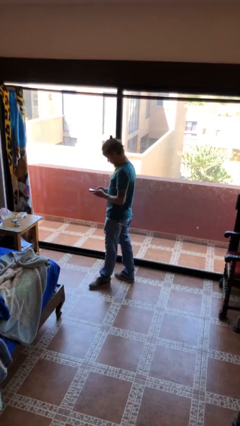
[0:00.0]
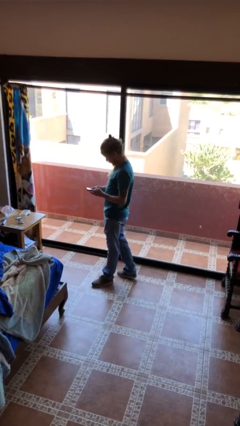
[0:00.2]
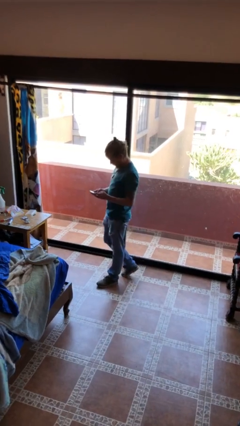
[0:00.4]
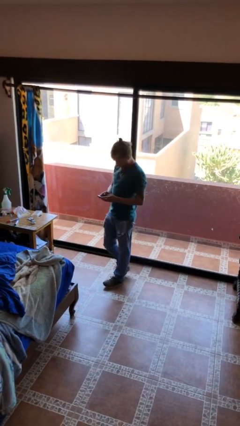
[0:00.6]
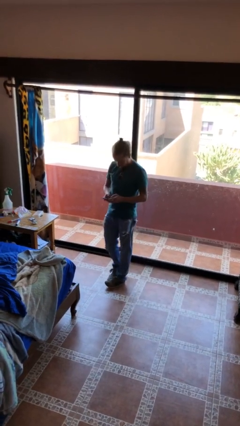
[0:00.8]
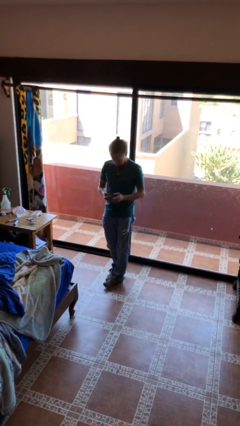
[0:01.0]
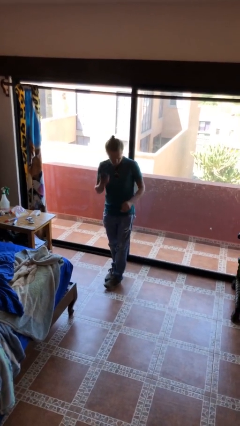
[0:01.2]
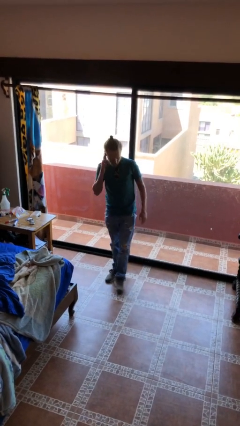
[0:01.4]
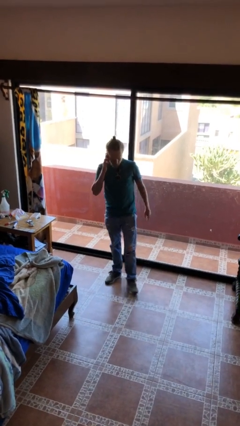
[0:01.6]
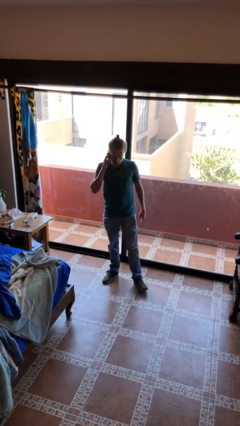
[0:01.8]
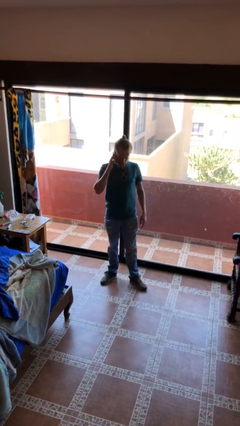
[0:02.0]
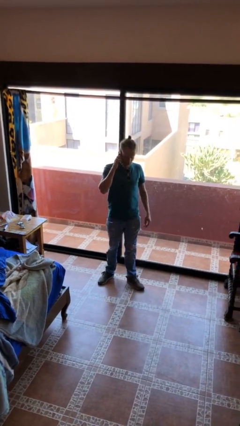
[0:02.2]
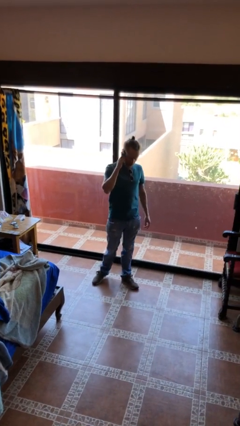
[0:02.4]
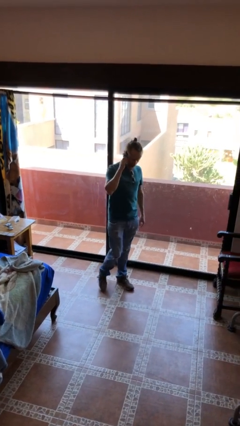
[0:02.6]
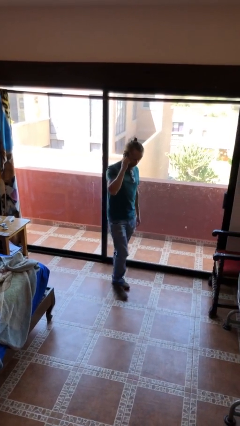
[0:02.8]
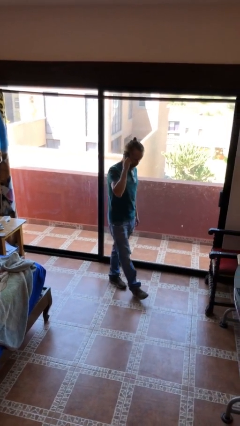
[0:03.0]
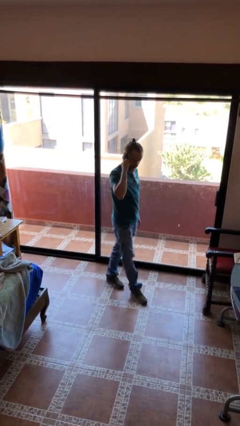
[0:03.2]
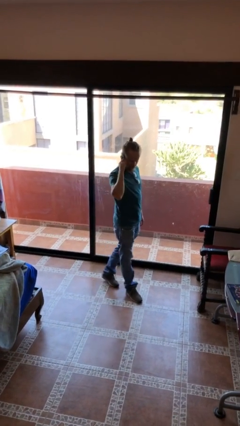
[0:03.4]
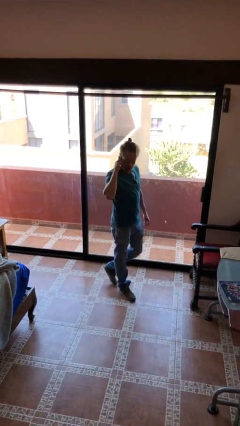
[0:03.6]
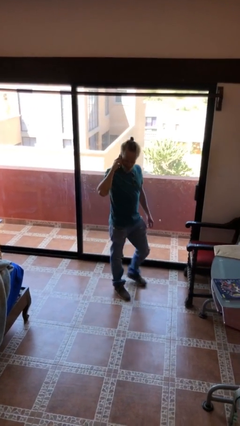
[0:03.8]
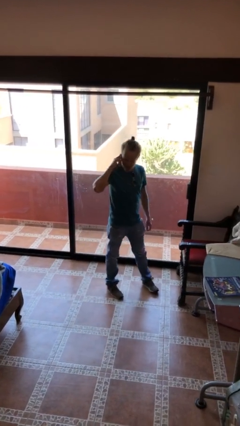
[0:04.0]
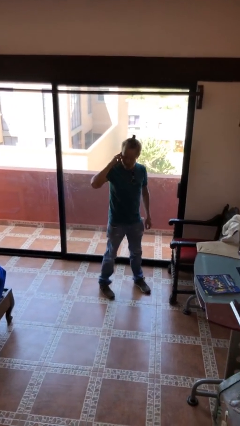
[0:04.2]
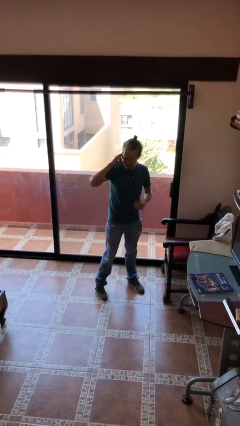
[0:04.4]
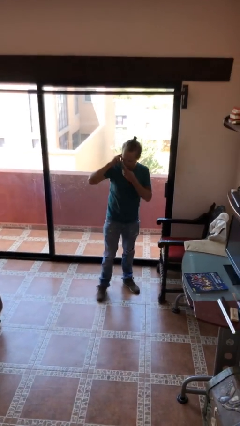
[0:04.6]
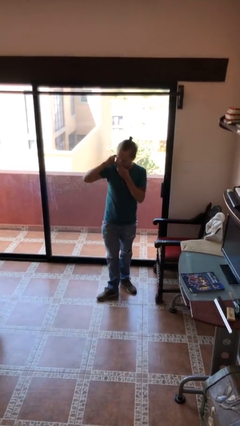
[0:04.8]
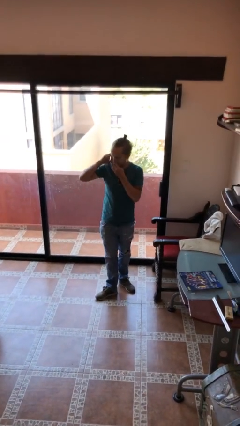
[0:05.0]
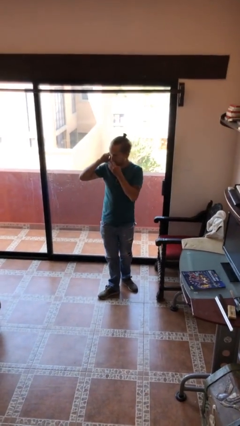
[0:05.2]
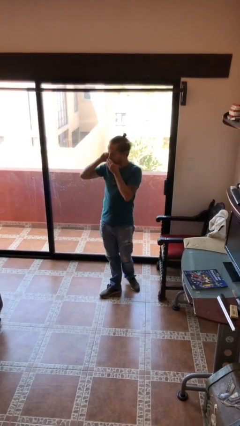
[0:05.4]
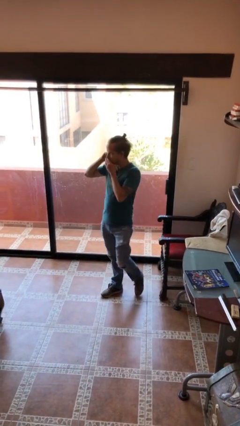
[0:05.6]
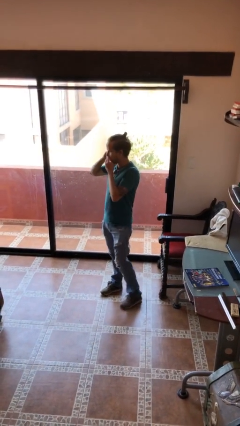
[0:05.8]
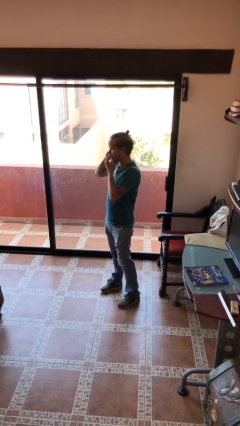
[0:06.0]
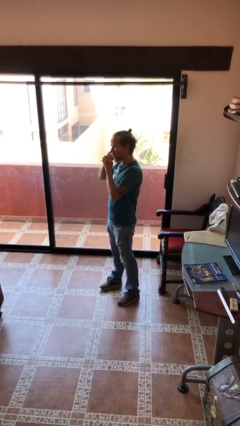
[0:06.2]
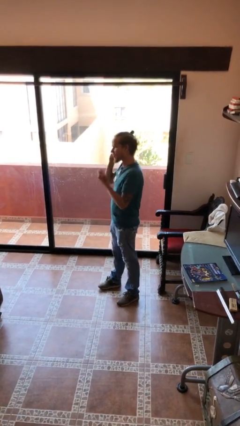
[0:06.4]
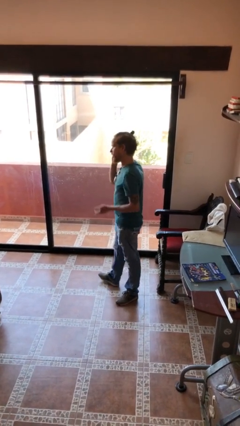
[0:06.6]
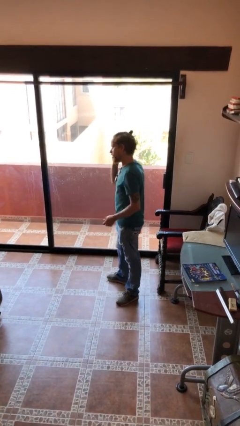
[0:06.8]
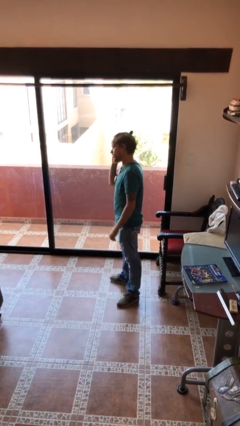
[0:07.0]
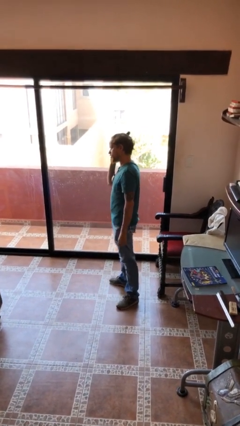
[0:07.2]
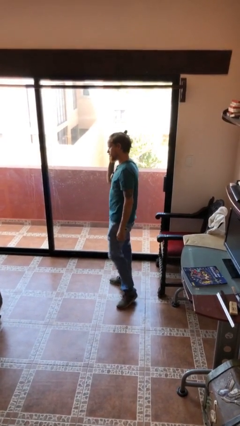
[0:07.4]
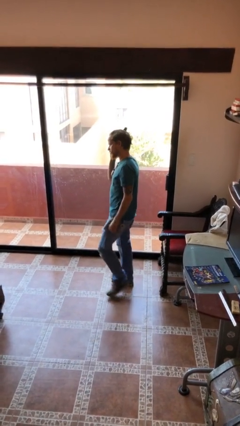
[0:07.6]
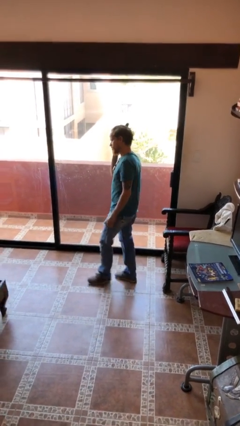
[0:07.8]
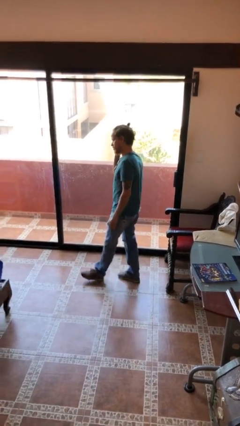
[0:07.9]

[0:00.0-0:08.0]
person talks on phone

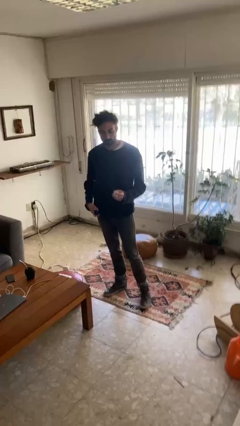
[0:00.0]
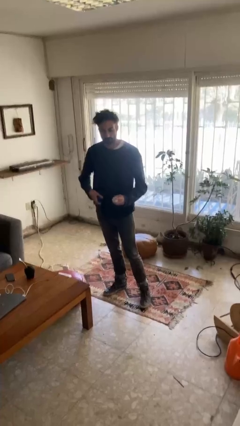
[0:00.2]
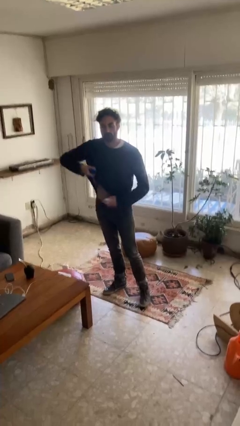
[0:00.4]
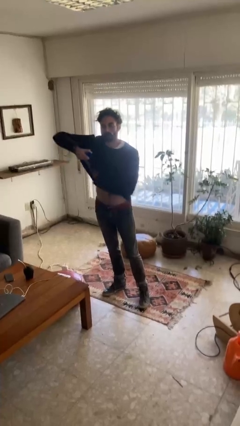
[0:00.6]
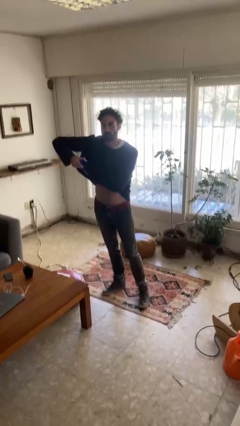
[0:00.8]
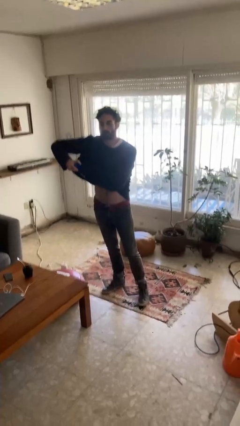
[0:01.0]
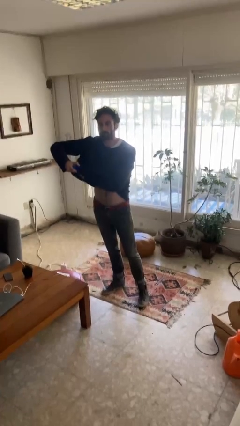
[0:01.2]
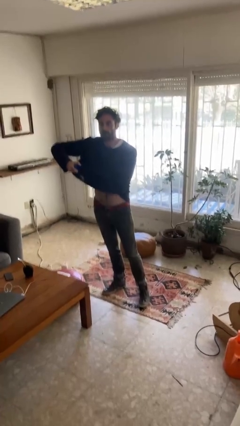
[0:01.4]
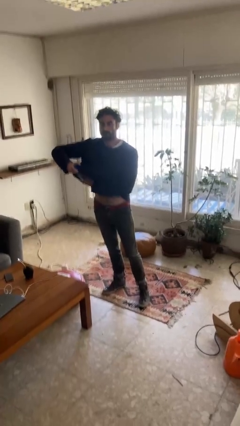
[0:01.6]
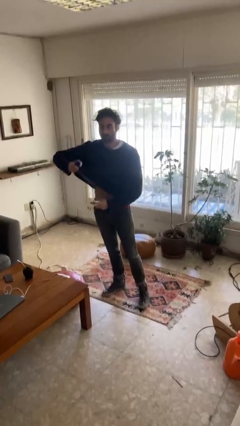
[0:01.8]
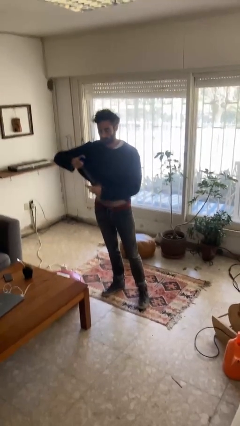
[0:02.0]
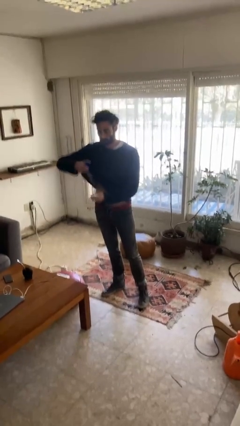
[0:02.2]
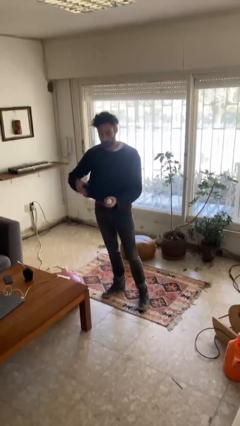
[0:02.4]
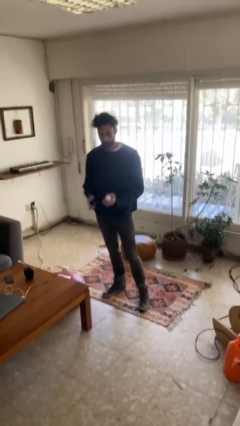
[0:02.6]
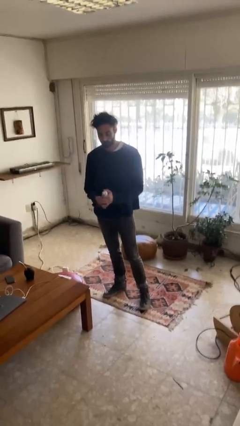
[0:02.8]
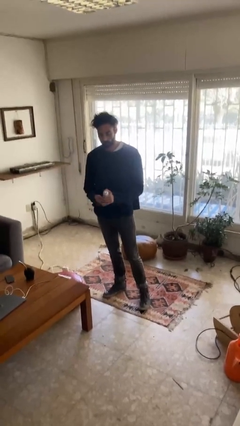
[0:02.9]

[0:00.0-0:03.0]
person applies deodorant

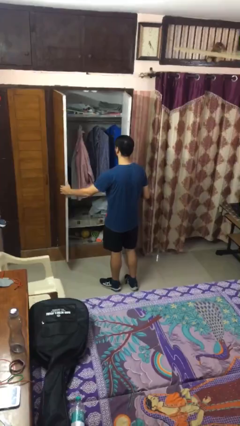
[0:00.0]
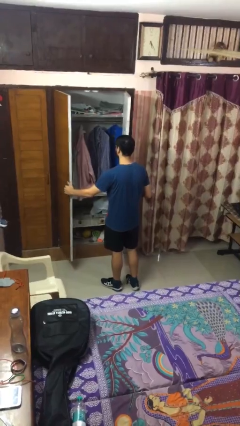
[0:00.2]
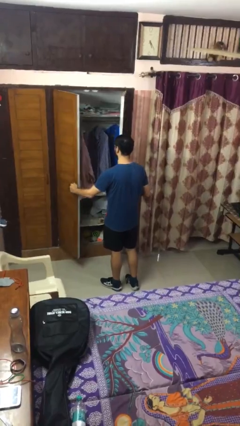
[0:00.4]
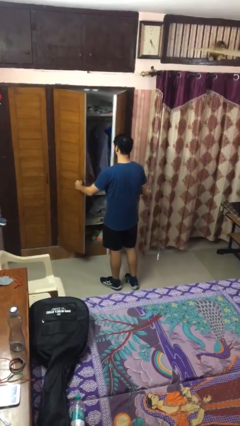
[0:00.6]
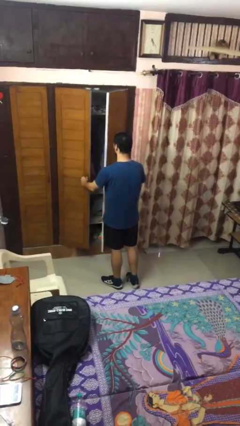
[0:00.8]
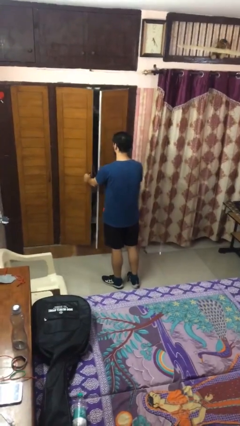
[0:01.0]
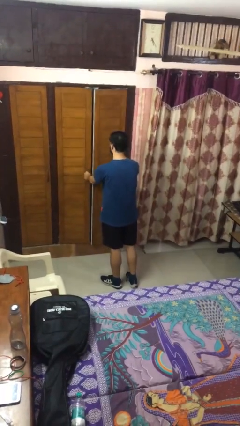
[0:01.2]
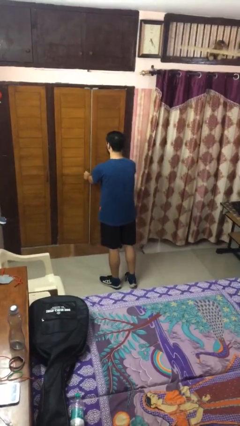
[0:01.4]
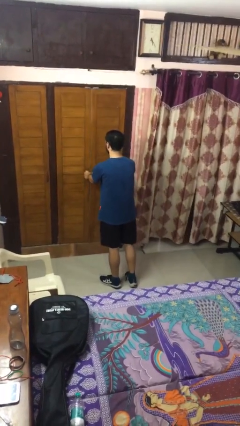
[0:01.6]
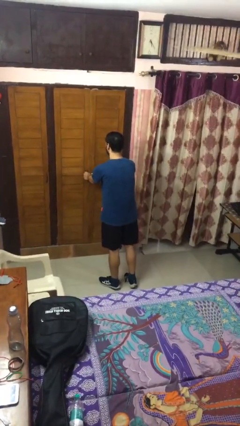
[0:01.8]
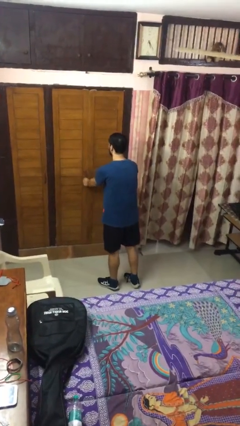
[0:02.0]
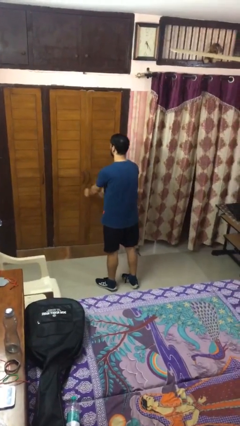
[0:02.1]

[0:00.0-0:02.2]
person closes closet door

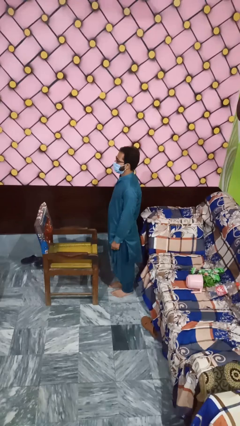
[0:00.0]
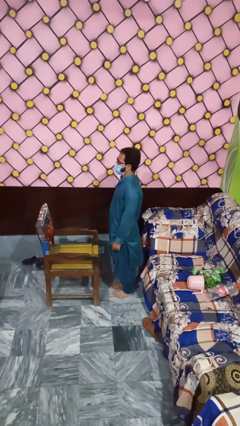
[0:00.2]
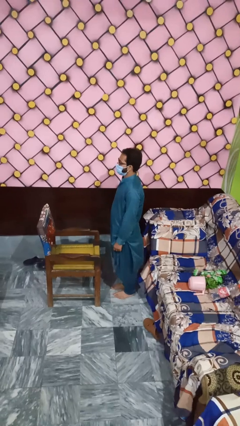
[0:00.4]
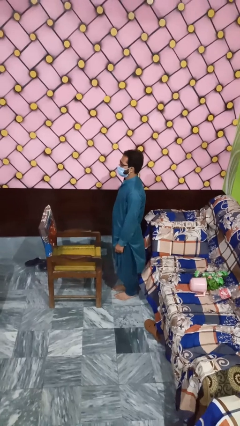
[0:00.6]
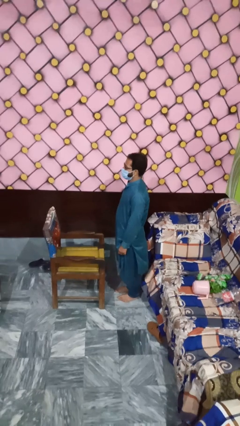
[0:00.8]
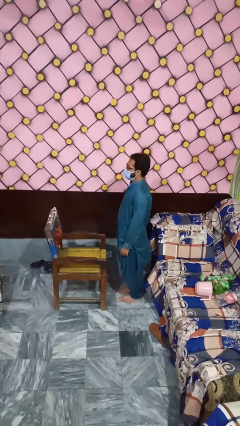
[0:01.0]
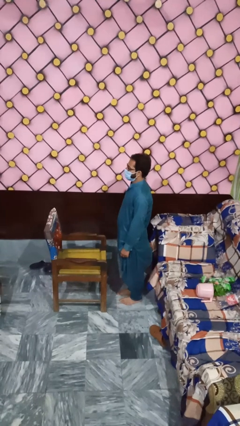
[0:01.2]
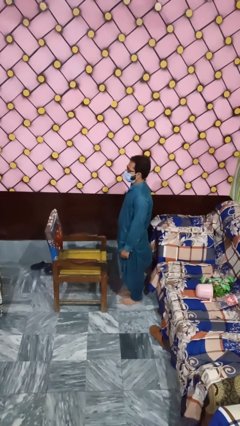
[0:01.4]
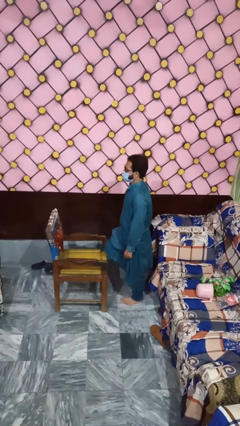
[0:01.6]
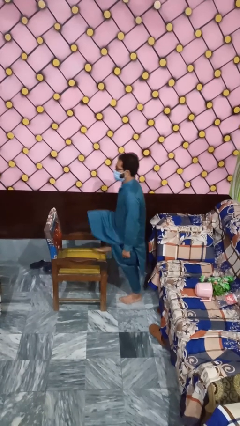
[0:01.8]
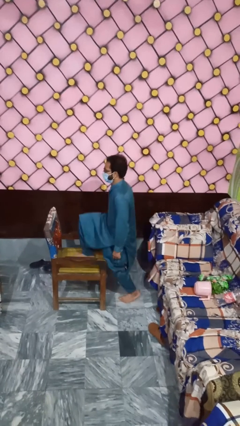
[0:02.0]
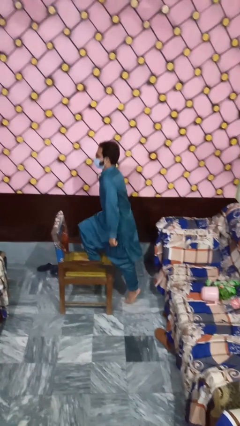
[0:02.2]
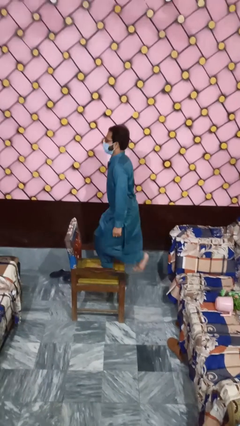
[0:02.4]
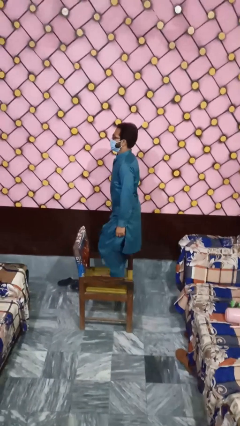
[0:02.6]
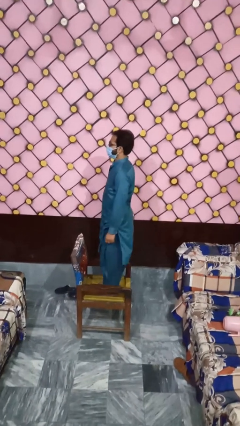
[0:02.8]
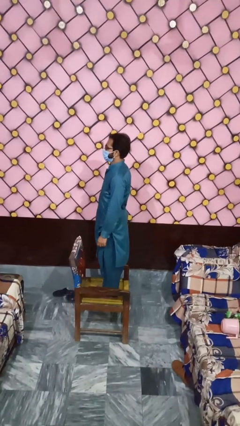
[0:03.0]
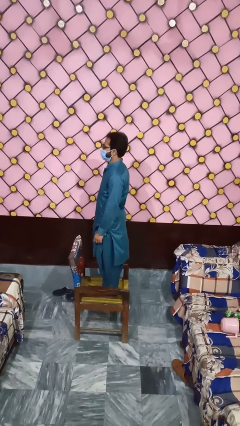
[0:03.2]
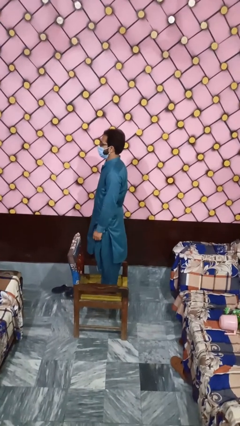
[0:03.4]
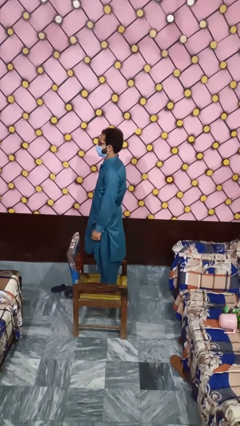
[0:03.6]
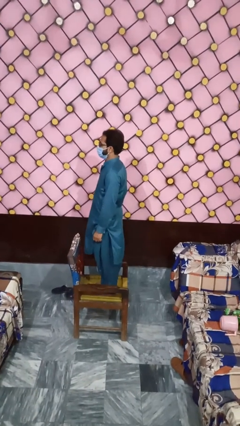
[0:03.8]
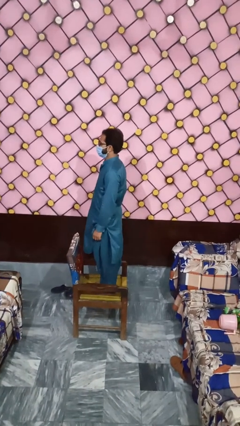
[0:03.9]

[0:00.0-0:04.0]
person climbs on chair

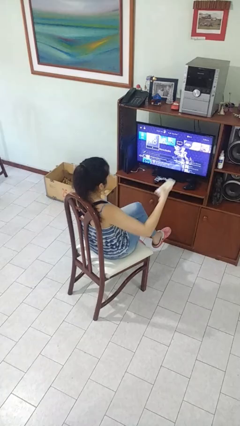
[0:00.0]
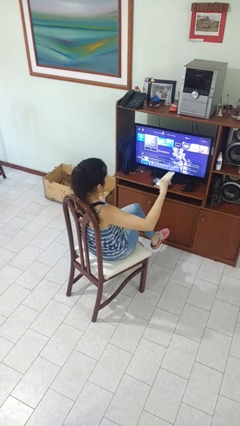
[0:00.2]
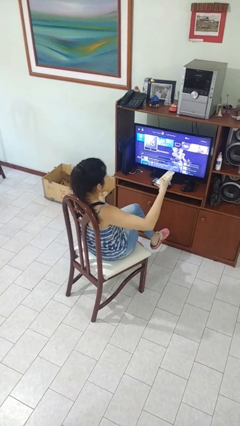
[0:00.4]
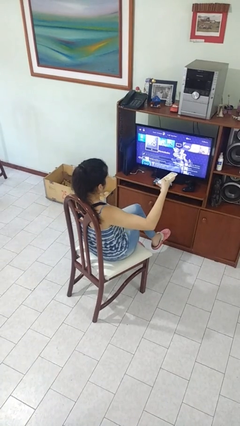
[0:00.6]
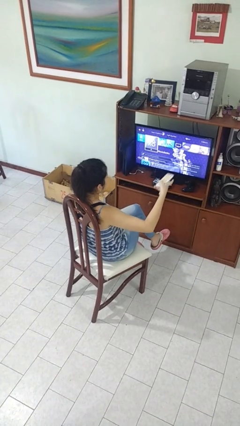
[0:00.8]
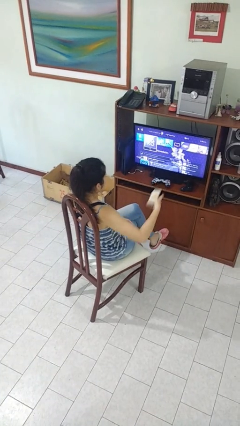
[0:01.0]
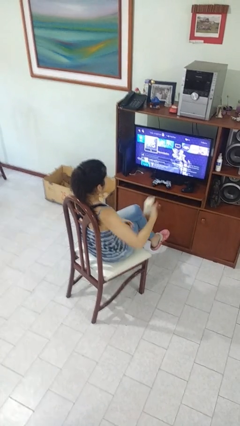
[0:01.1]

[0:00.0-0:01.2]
person uses television remote
